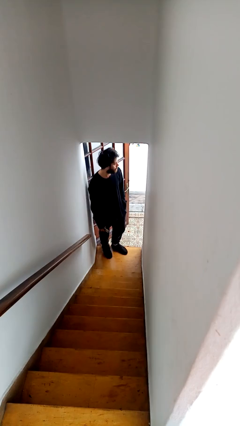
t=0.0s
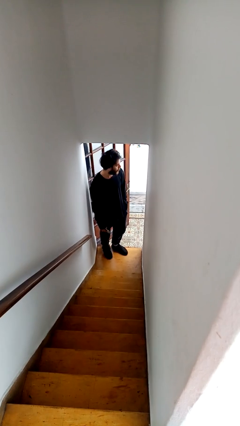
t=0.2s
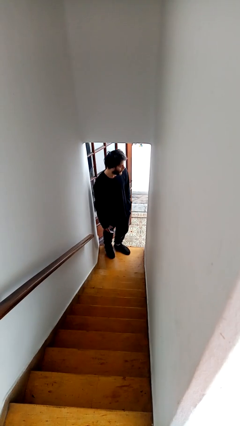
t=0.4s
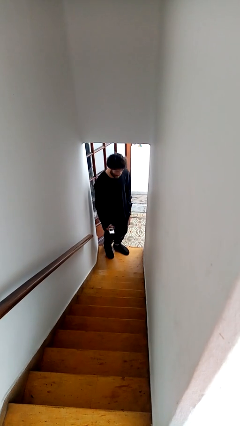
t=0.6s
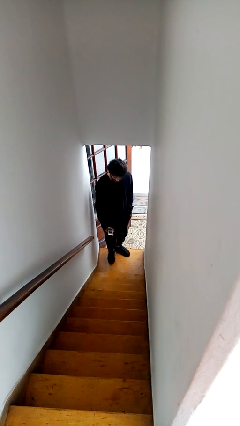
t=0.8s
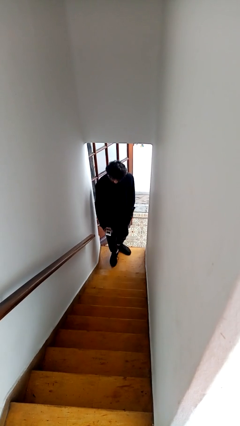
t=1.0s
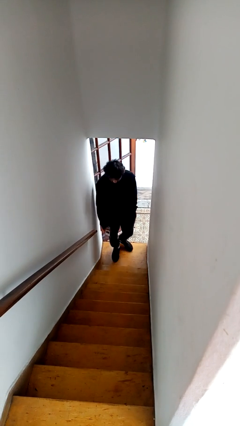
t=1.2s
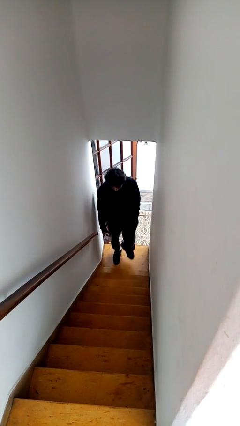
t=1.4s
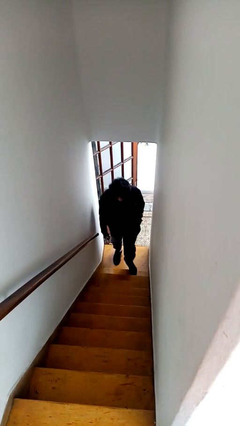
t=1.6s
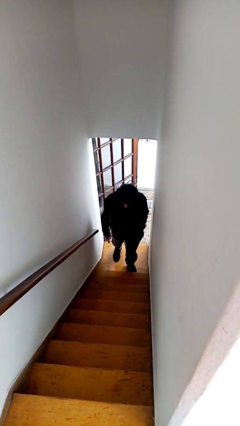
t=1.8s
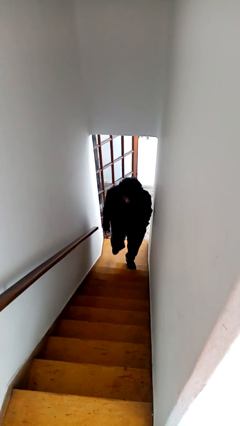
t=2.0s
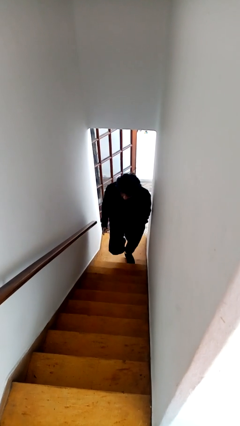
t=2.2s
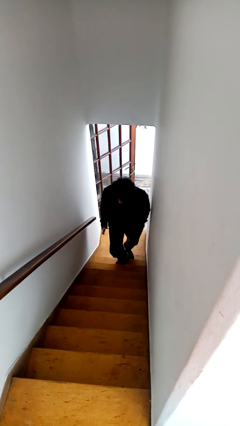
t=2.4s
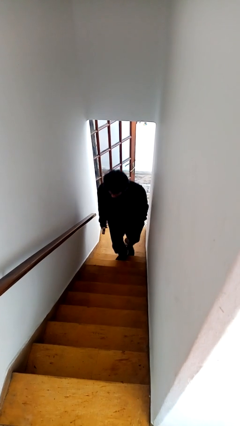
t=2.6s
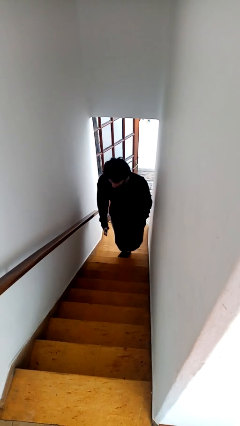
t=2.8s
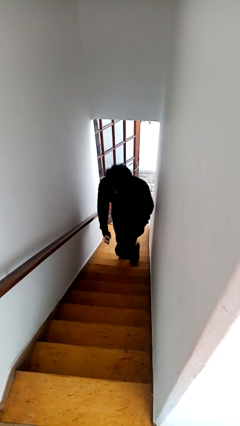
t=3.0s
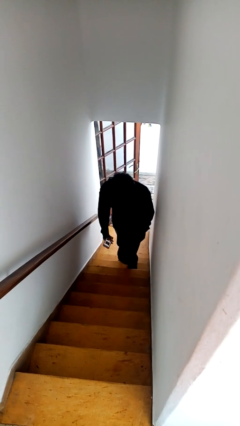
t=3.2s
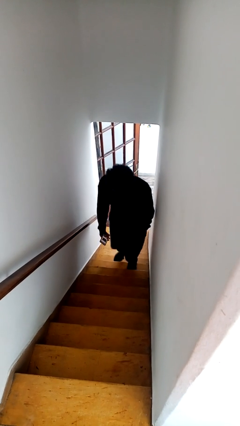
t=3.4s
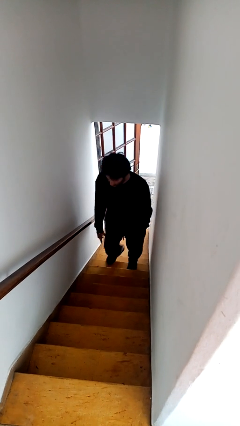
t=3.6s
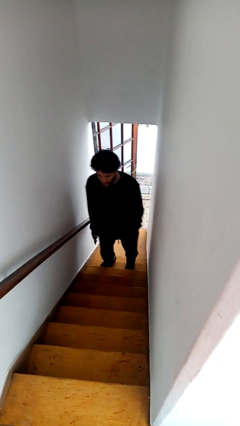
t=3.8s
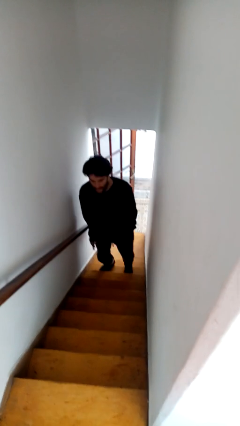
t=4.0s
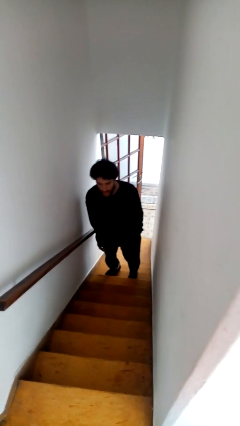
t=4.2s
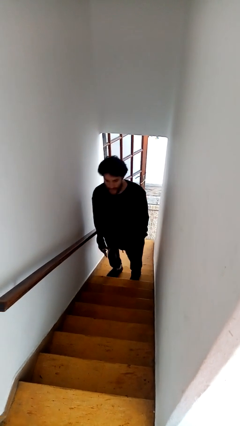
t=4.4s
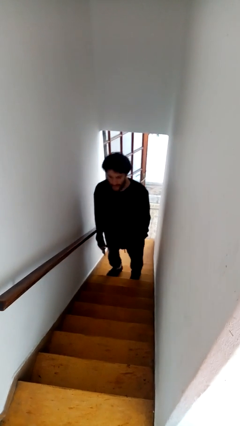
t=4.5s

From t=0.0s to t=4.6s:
person climbs up stairs

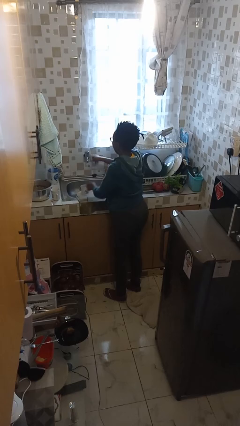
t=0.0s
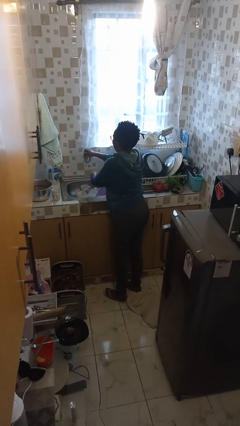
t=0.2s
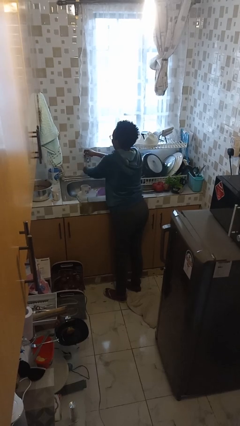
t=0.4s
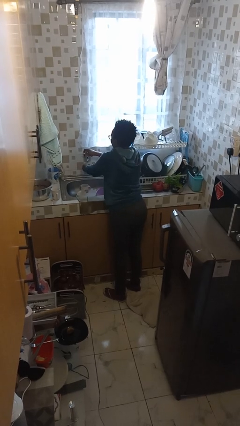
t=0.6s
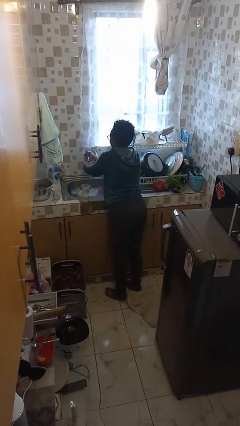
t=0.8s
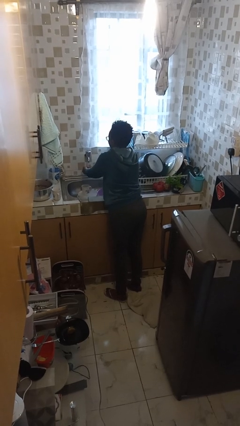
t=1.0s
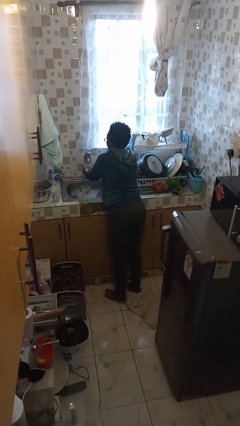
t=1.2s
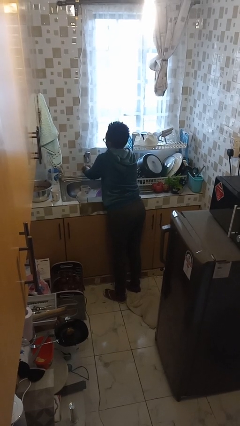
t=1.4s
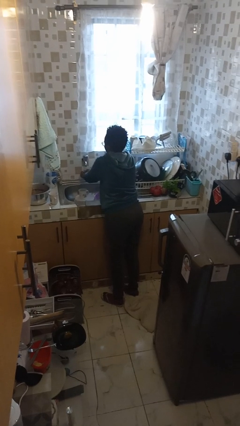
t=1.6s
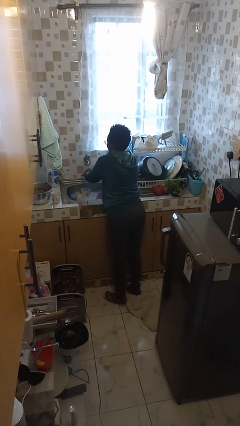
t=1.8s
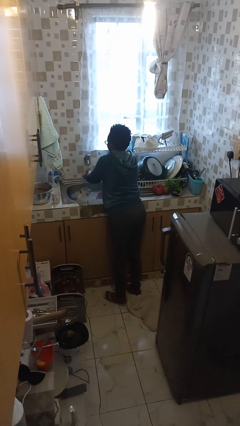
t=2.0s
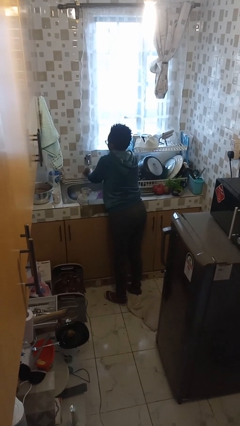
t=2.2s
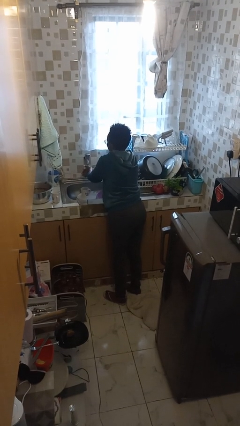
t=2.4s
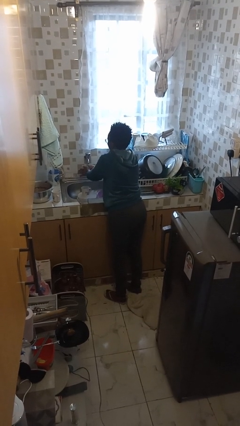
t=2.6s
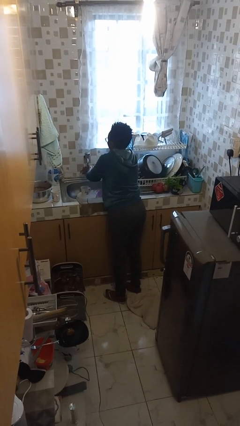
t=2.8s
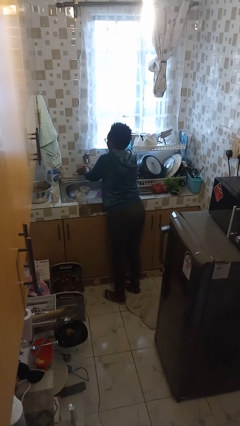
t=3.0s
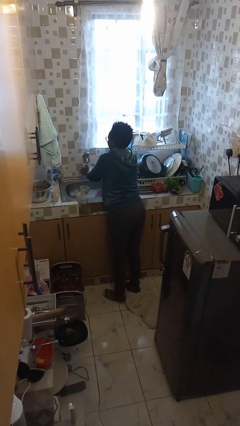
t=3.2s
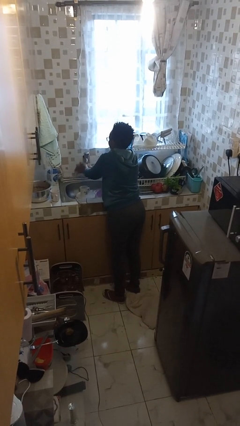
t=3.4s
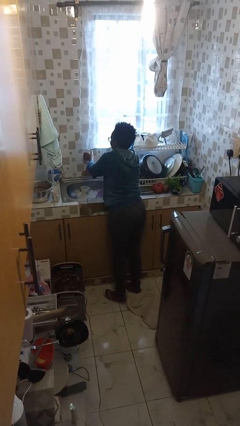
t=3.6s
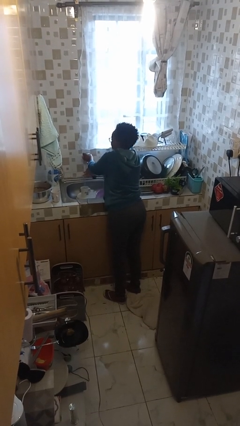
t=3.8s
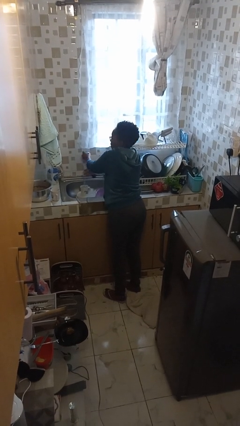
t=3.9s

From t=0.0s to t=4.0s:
person washes hands

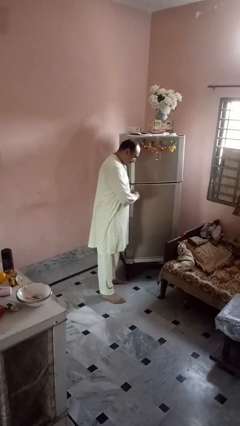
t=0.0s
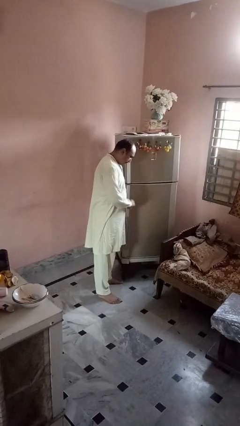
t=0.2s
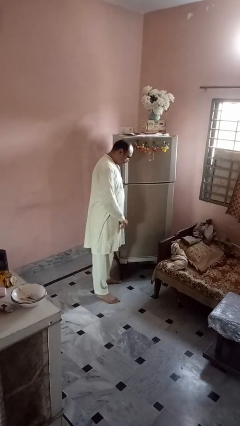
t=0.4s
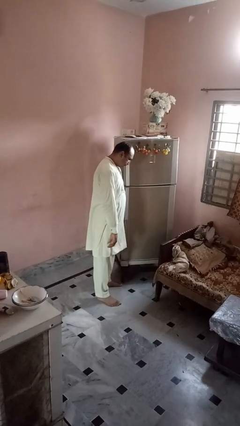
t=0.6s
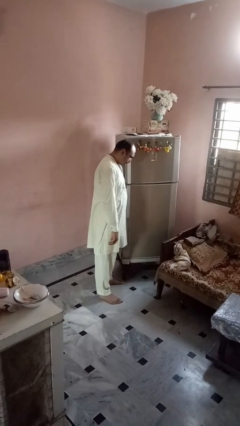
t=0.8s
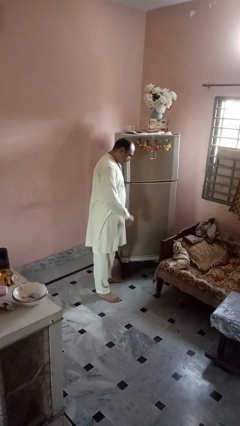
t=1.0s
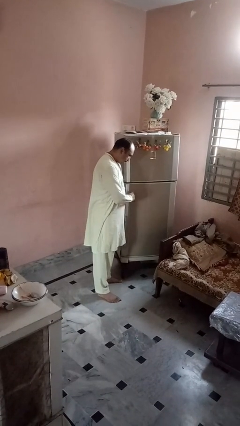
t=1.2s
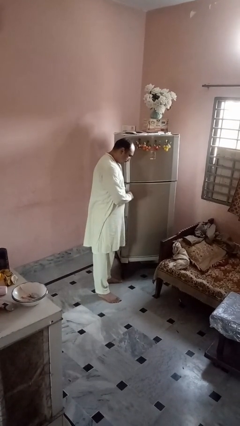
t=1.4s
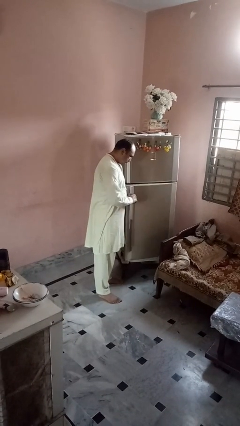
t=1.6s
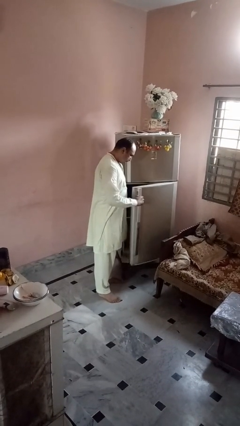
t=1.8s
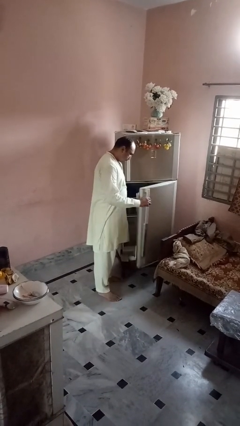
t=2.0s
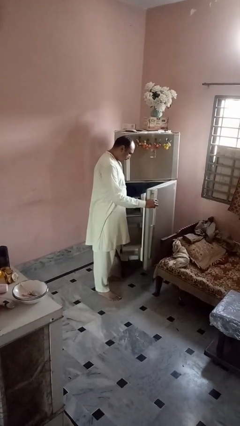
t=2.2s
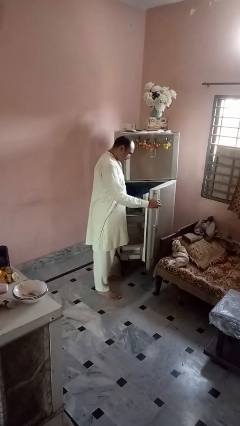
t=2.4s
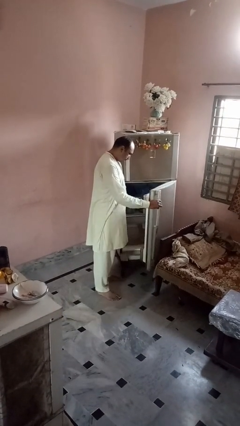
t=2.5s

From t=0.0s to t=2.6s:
person opens refrigerator

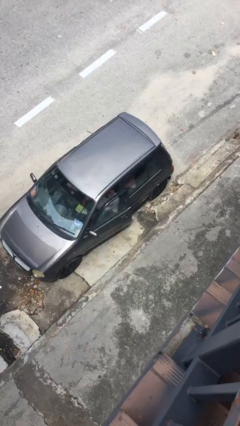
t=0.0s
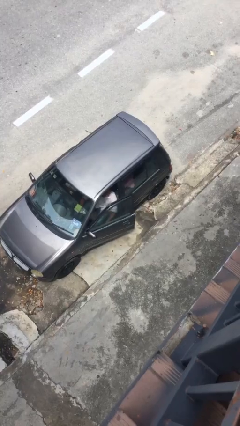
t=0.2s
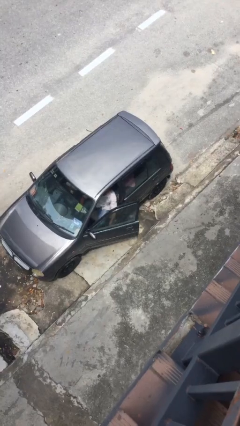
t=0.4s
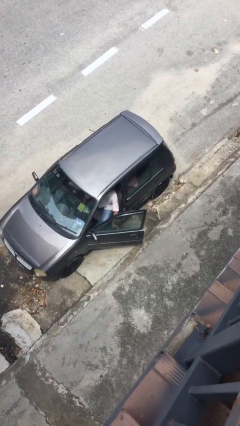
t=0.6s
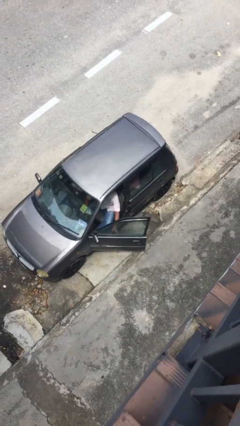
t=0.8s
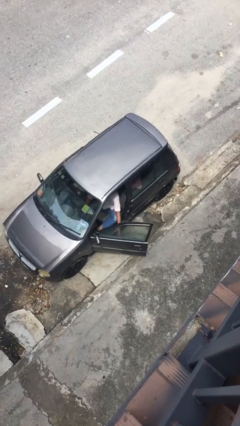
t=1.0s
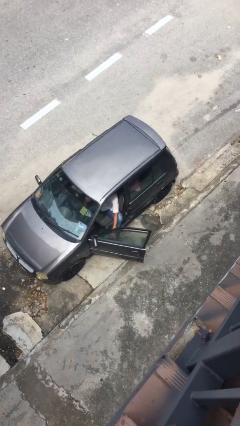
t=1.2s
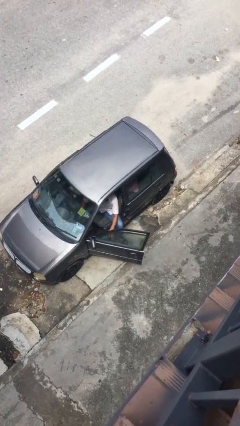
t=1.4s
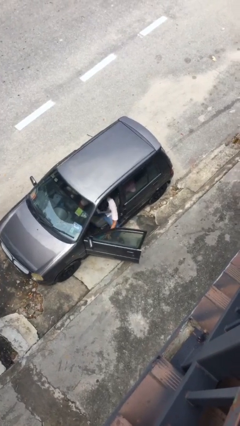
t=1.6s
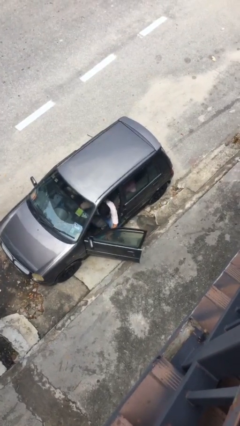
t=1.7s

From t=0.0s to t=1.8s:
person opens car door

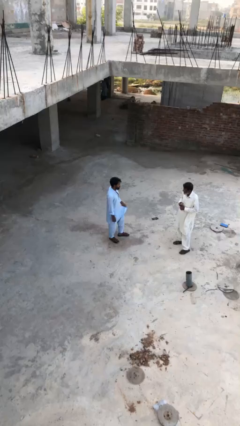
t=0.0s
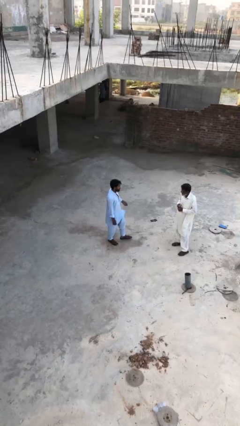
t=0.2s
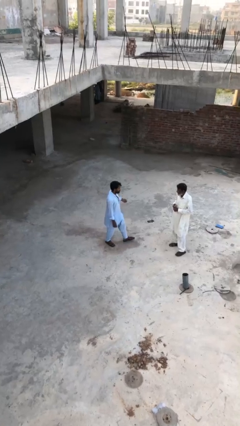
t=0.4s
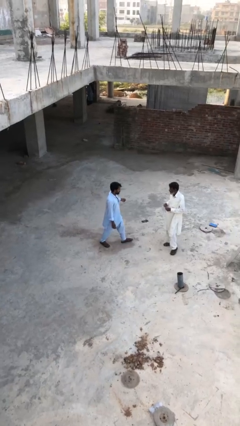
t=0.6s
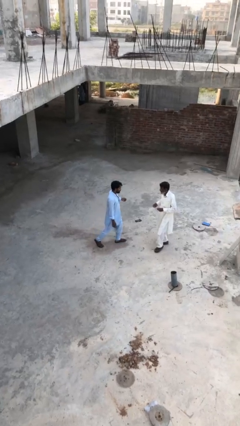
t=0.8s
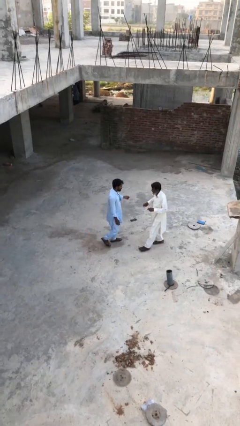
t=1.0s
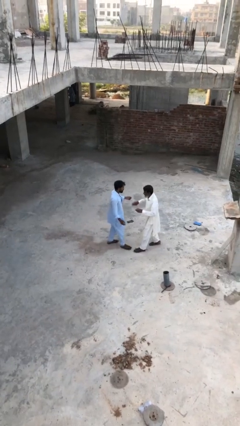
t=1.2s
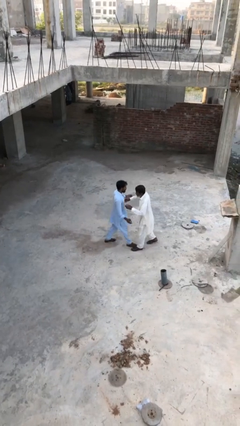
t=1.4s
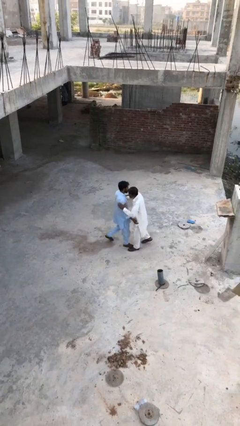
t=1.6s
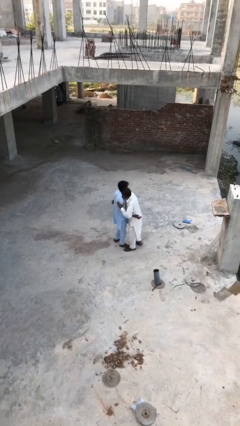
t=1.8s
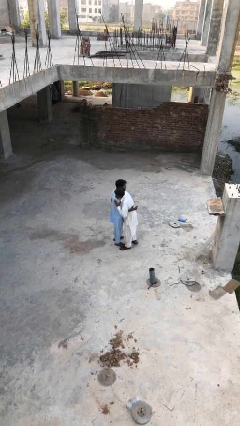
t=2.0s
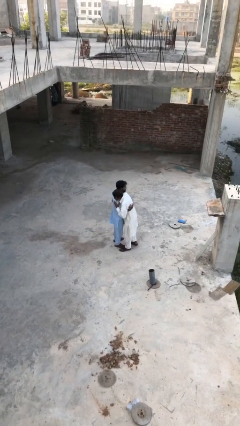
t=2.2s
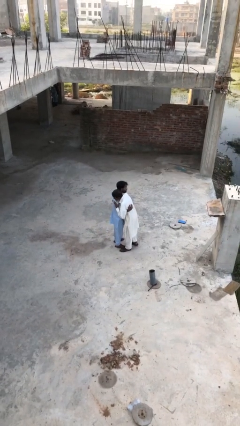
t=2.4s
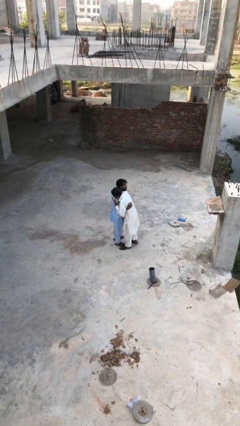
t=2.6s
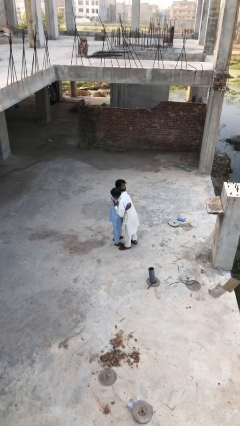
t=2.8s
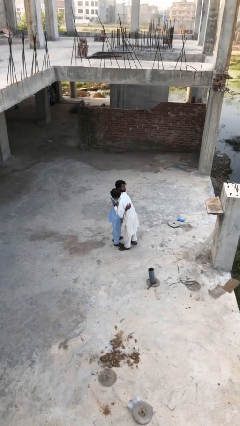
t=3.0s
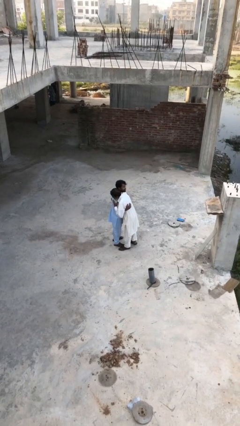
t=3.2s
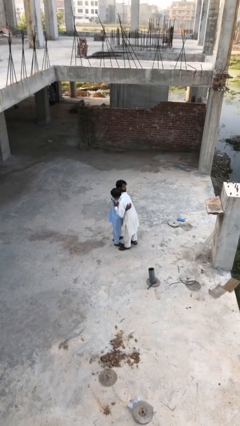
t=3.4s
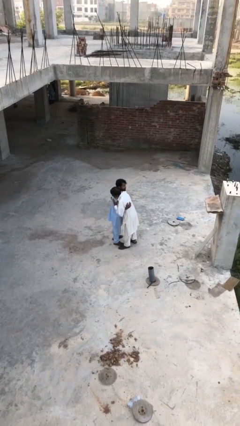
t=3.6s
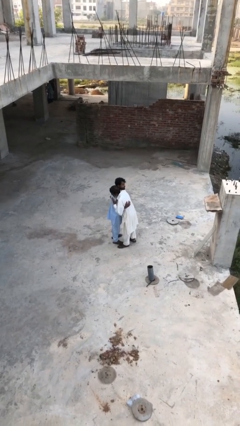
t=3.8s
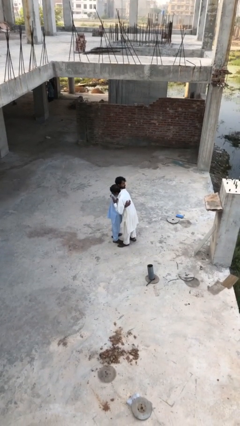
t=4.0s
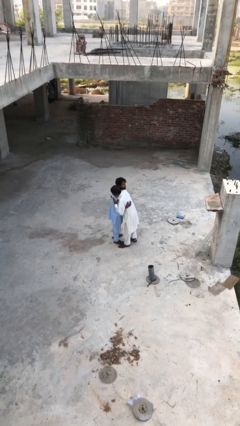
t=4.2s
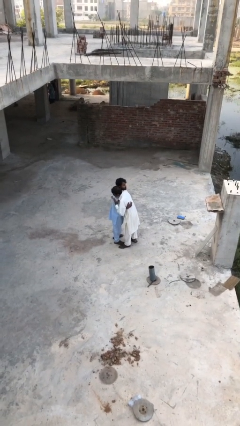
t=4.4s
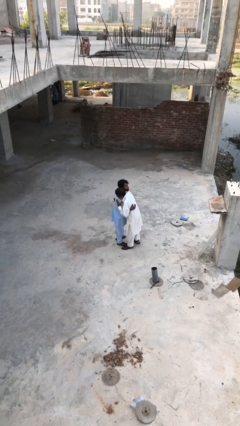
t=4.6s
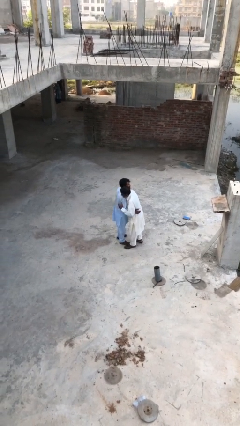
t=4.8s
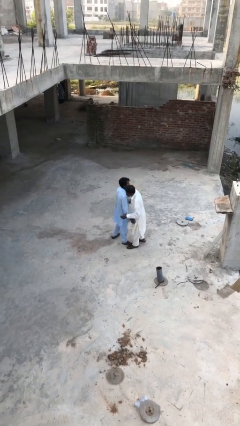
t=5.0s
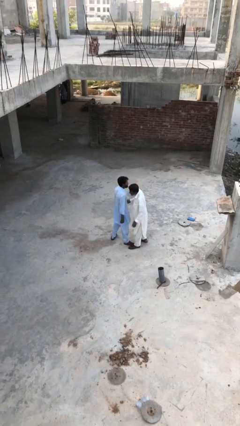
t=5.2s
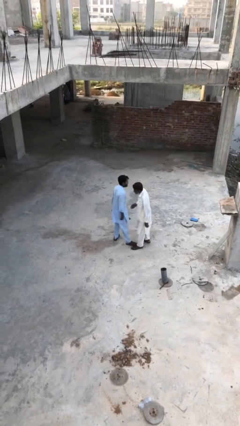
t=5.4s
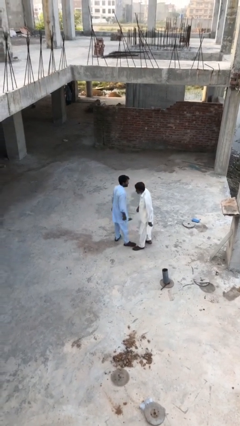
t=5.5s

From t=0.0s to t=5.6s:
person embraces person
